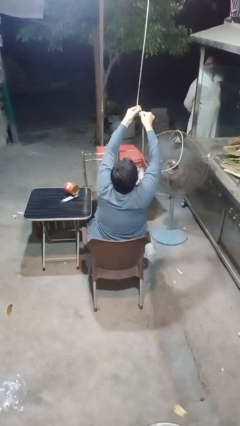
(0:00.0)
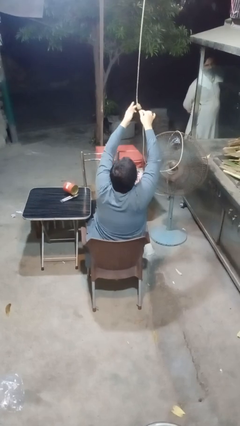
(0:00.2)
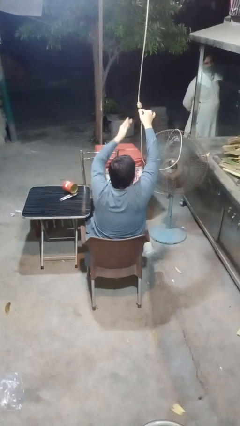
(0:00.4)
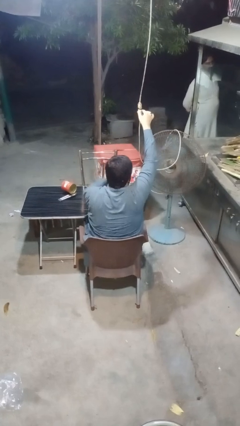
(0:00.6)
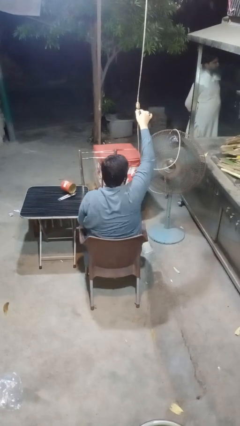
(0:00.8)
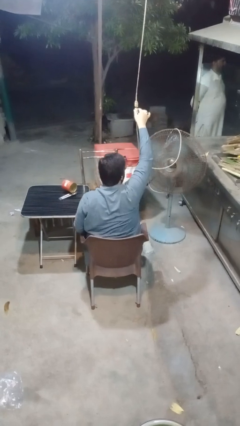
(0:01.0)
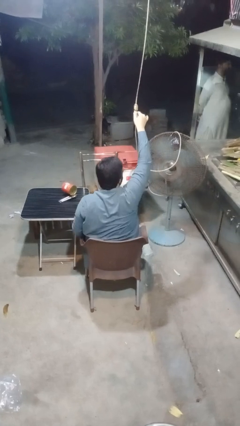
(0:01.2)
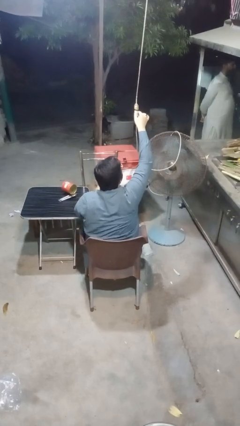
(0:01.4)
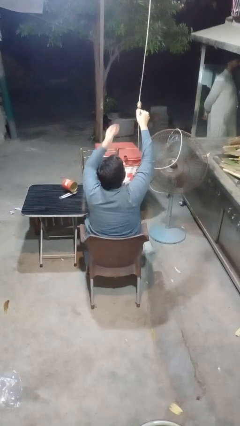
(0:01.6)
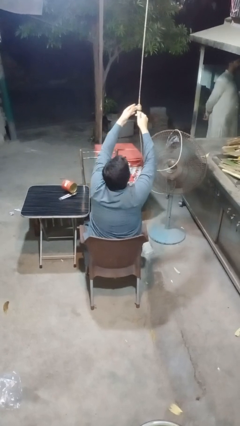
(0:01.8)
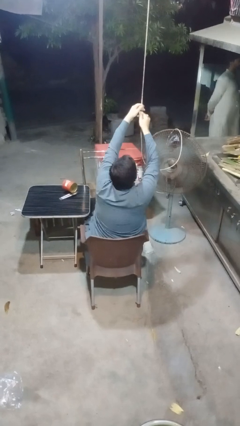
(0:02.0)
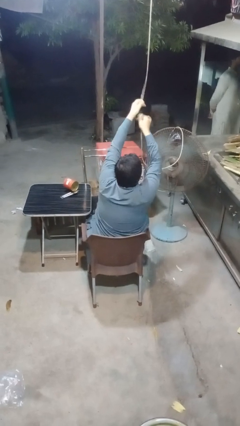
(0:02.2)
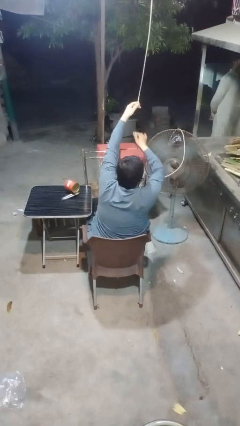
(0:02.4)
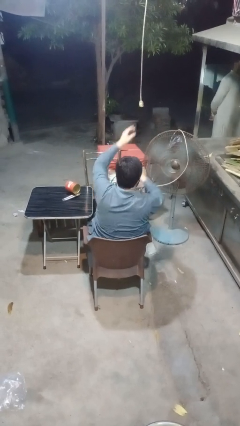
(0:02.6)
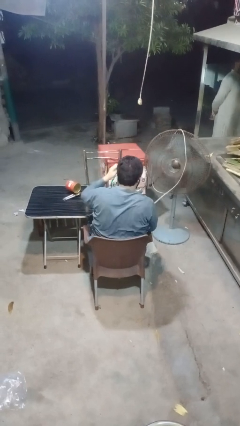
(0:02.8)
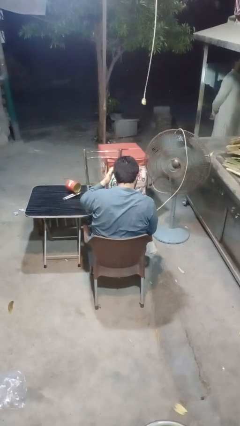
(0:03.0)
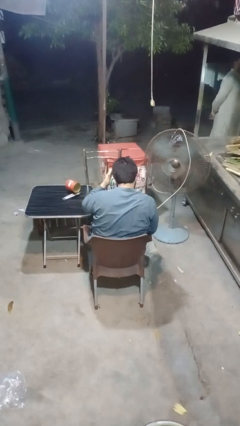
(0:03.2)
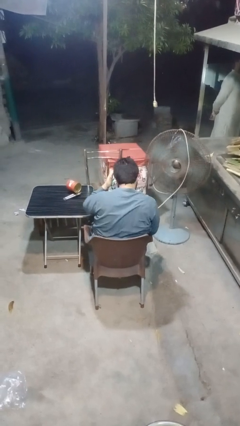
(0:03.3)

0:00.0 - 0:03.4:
person turns off fan

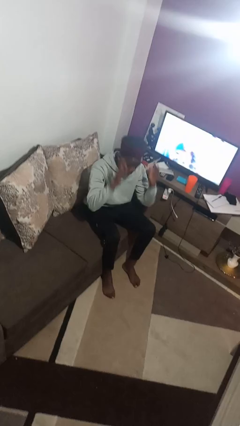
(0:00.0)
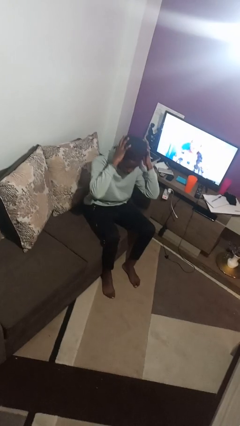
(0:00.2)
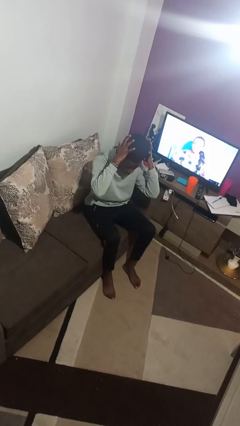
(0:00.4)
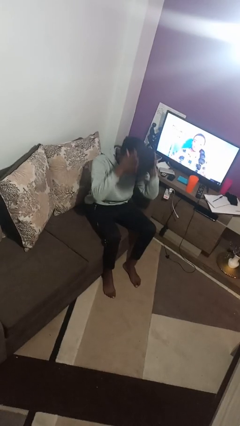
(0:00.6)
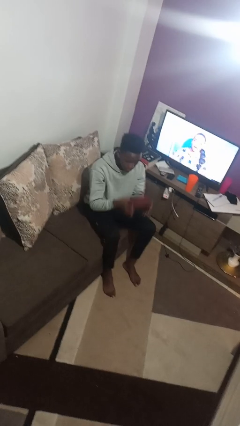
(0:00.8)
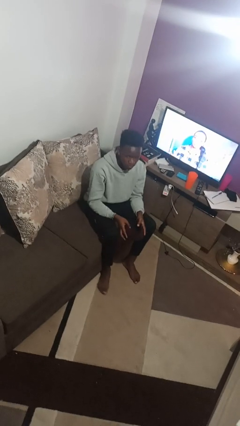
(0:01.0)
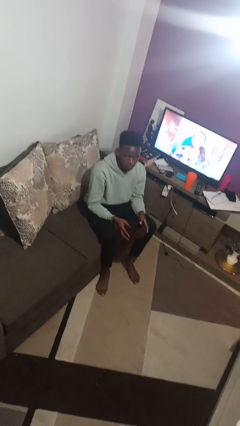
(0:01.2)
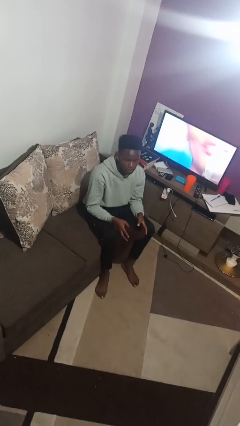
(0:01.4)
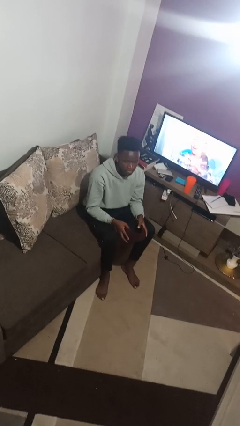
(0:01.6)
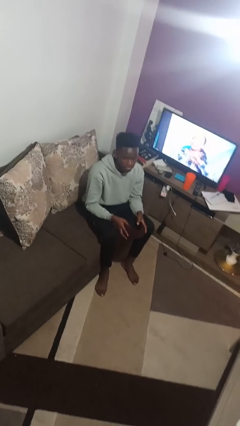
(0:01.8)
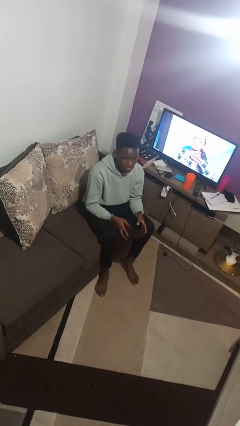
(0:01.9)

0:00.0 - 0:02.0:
person takes off hat

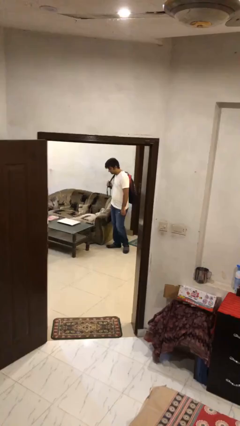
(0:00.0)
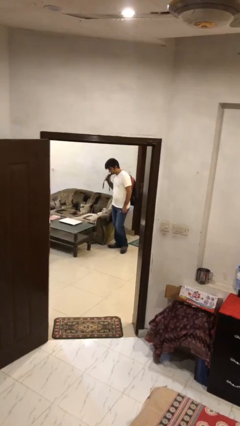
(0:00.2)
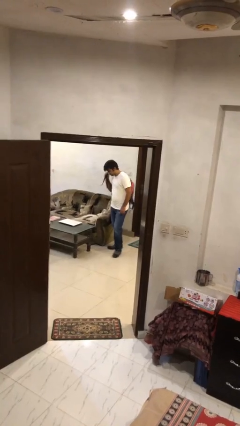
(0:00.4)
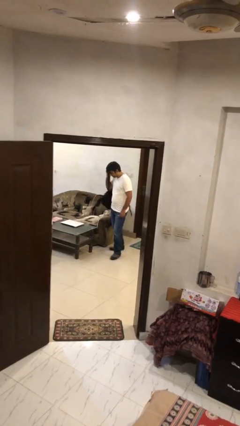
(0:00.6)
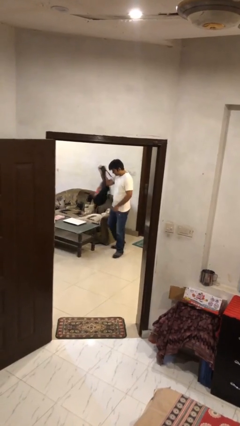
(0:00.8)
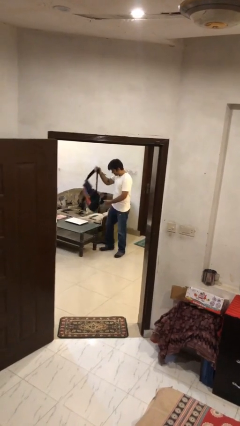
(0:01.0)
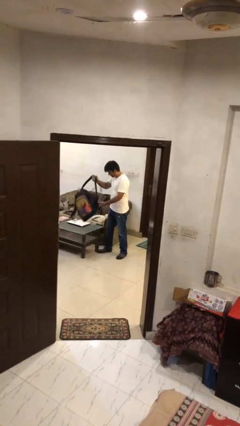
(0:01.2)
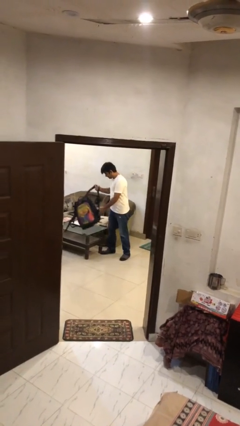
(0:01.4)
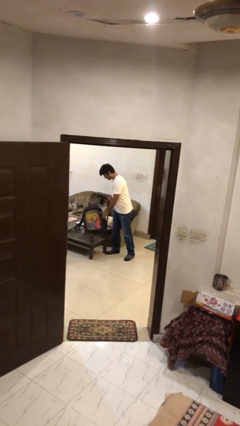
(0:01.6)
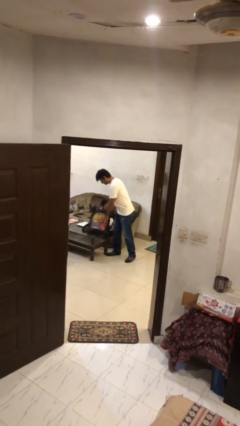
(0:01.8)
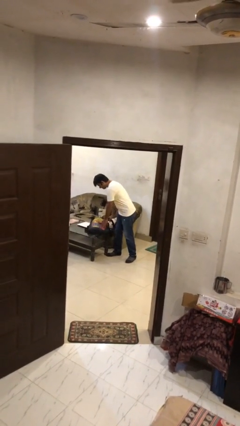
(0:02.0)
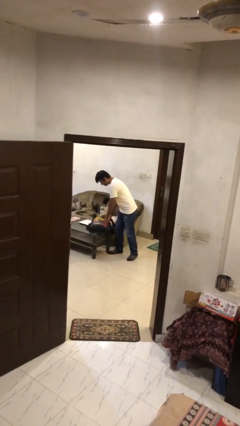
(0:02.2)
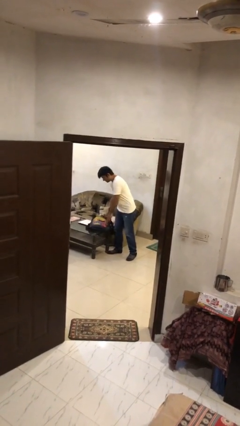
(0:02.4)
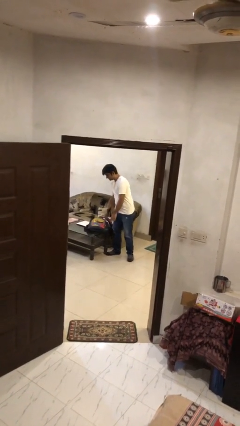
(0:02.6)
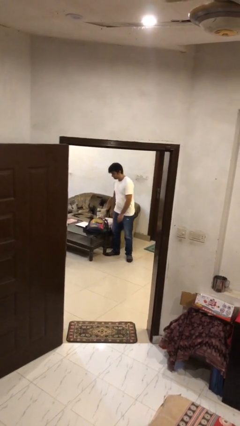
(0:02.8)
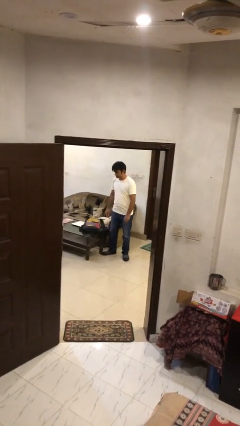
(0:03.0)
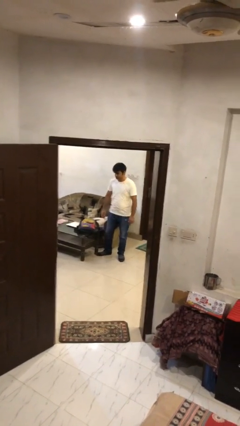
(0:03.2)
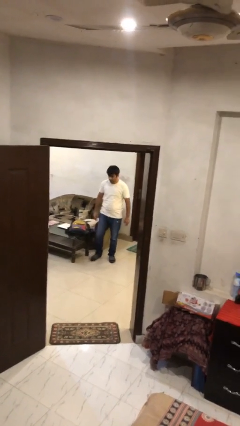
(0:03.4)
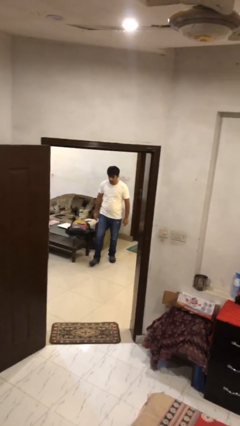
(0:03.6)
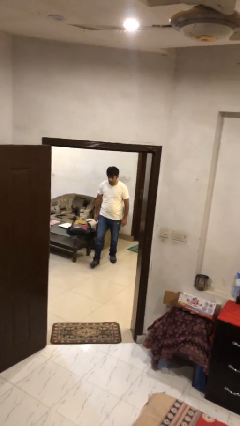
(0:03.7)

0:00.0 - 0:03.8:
person puts down object on table

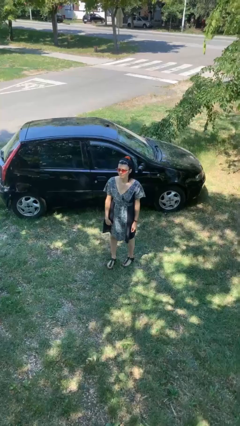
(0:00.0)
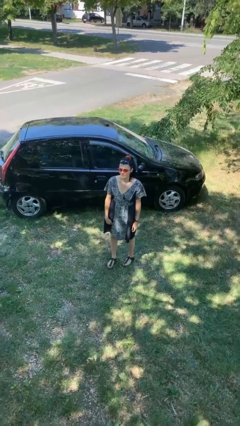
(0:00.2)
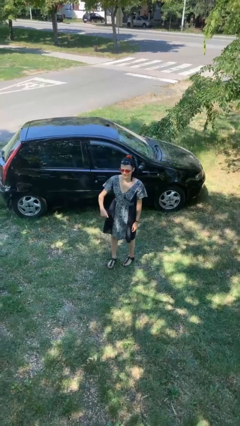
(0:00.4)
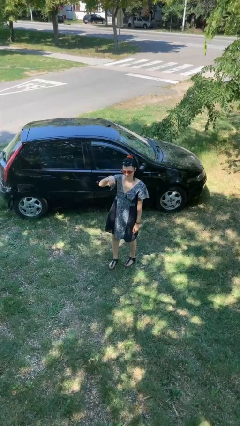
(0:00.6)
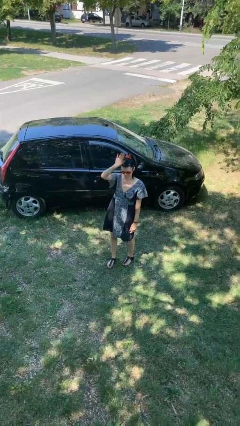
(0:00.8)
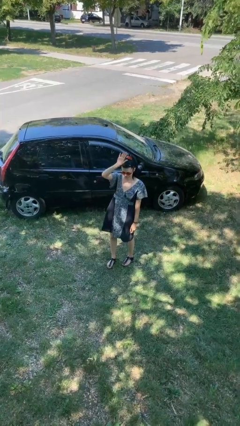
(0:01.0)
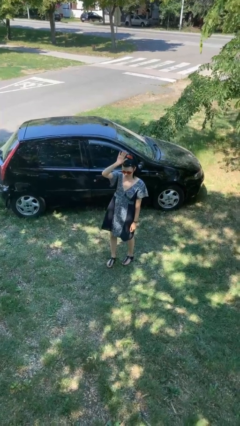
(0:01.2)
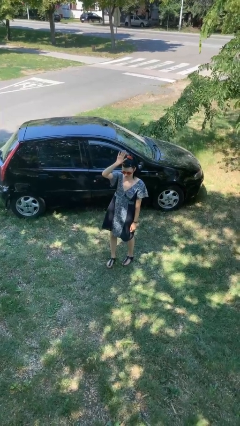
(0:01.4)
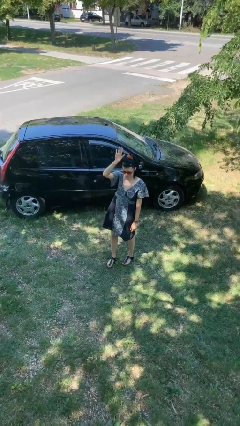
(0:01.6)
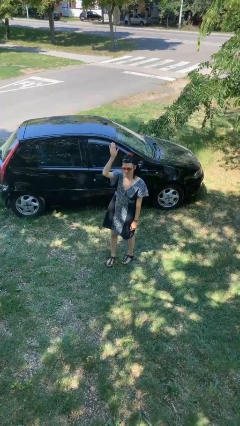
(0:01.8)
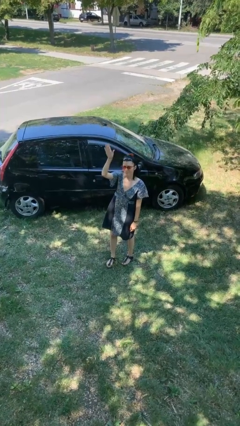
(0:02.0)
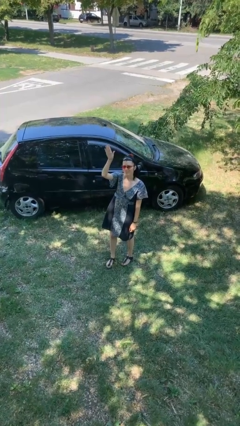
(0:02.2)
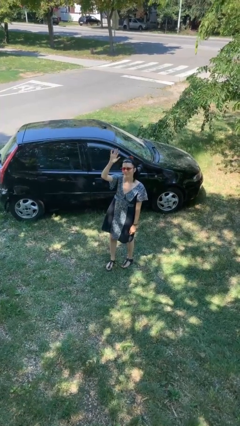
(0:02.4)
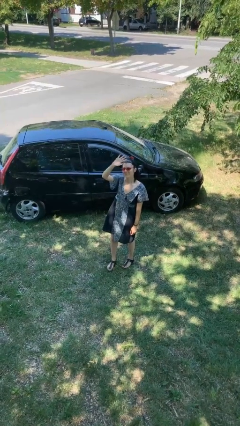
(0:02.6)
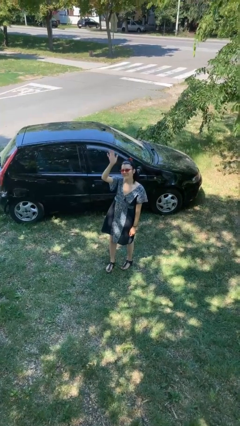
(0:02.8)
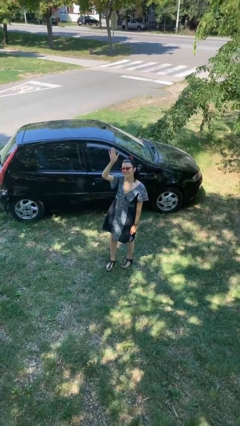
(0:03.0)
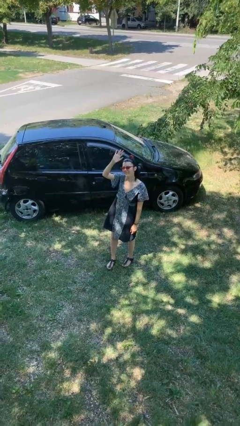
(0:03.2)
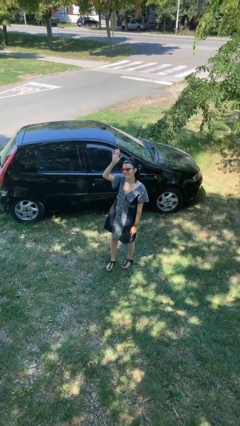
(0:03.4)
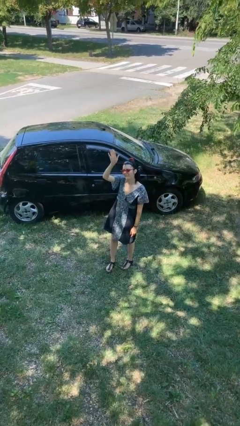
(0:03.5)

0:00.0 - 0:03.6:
person waves at person

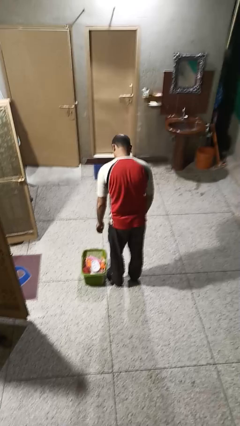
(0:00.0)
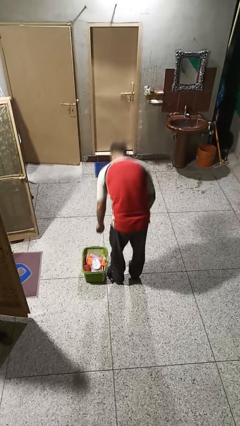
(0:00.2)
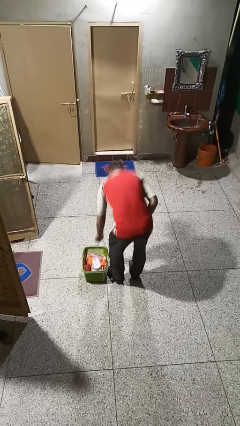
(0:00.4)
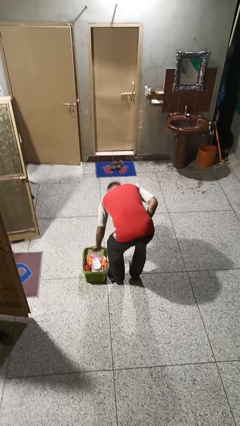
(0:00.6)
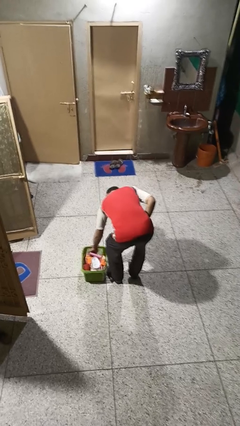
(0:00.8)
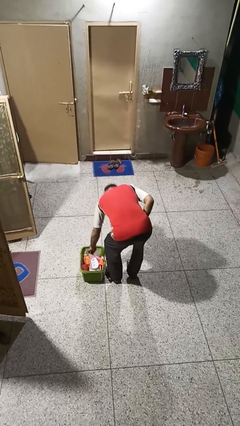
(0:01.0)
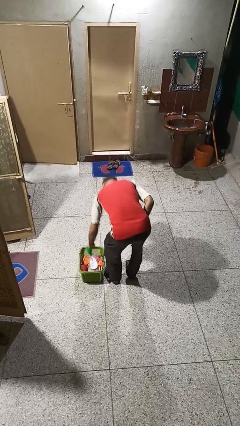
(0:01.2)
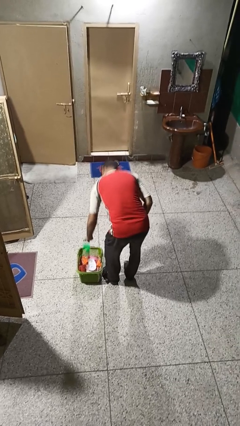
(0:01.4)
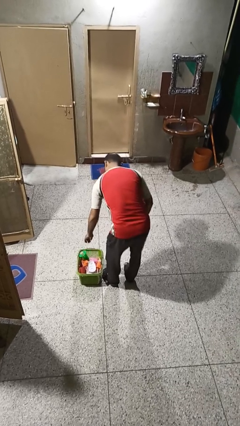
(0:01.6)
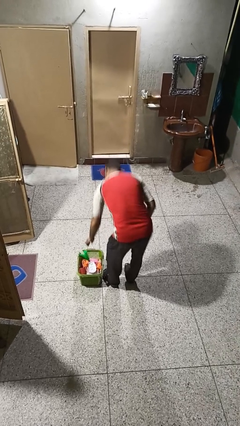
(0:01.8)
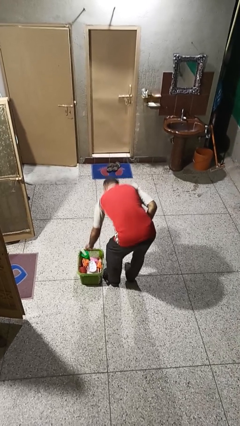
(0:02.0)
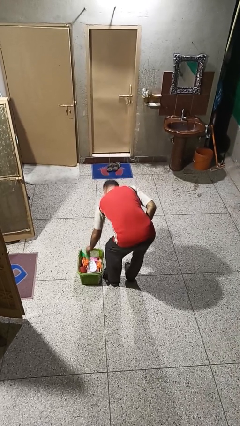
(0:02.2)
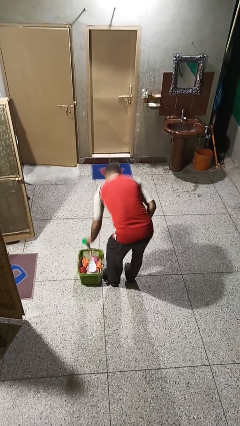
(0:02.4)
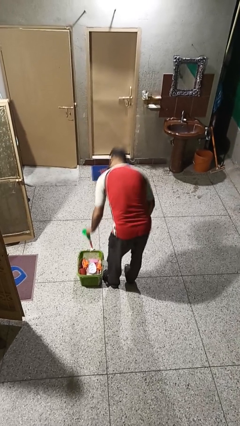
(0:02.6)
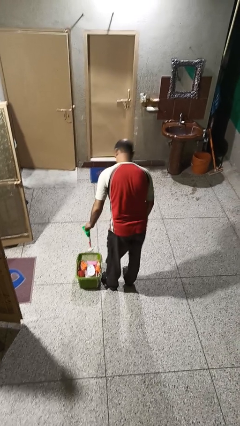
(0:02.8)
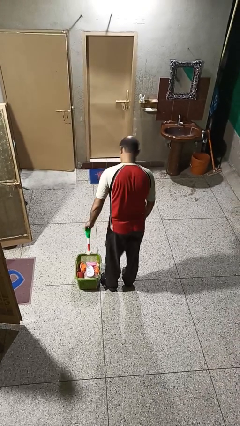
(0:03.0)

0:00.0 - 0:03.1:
person takes object from basket

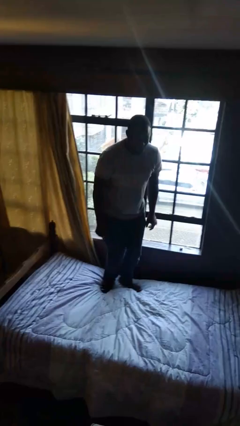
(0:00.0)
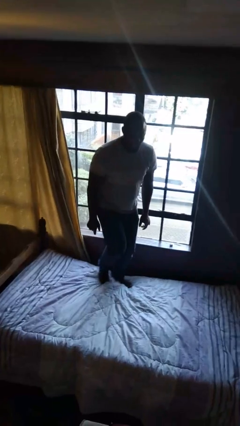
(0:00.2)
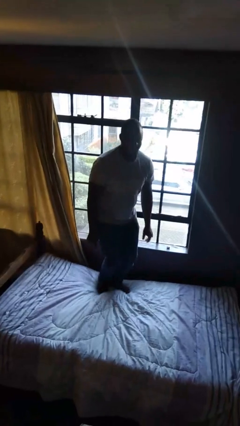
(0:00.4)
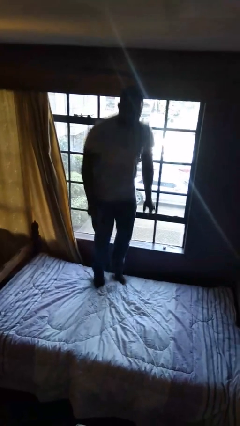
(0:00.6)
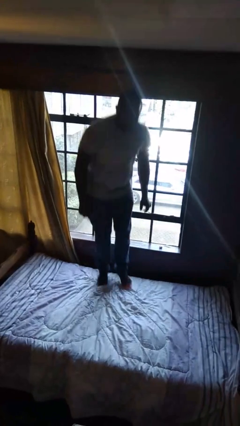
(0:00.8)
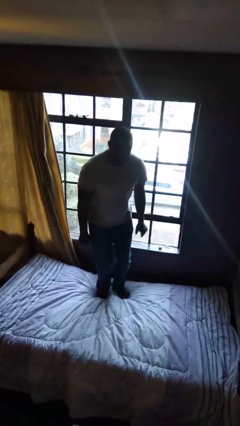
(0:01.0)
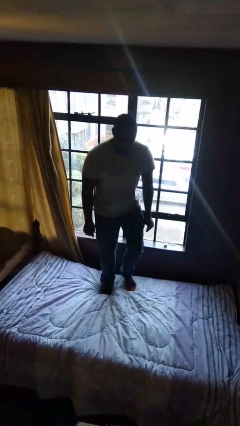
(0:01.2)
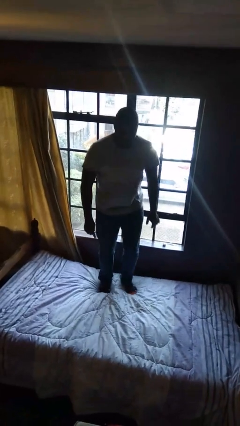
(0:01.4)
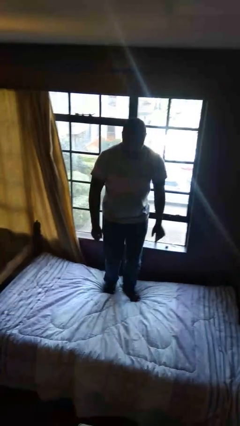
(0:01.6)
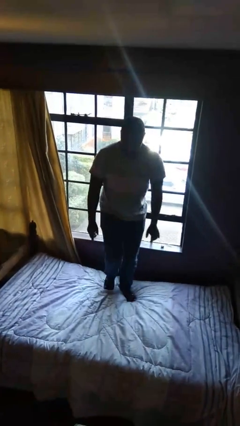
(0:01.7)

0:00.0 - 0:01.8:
person jumps on bed
